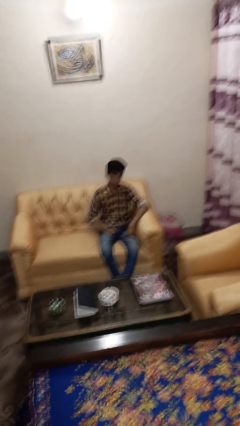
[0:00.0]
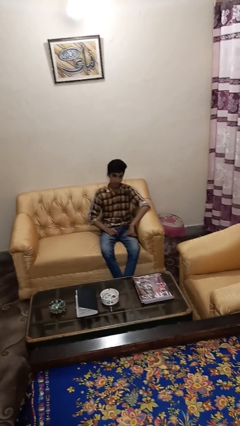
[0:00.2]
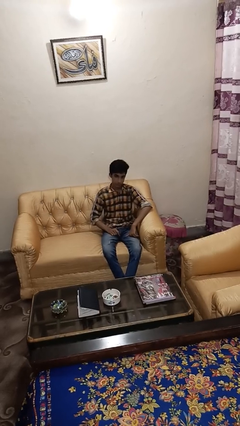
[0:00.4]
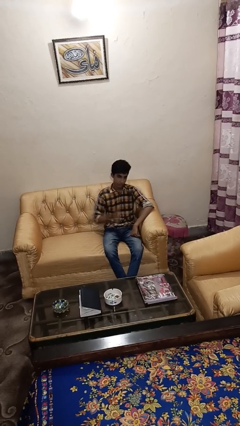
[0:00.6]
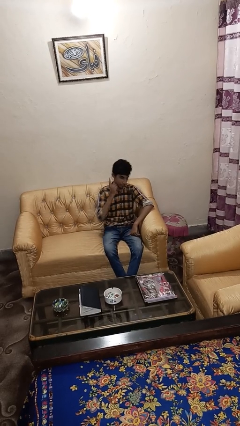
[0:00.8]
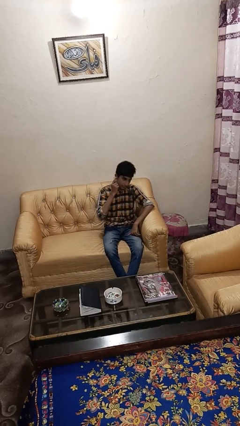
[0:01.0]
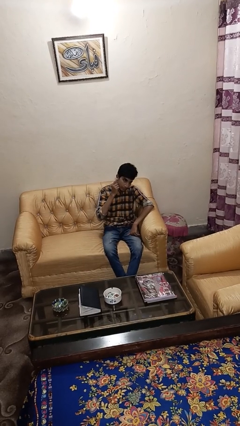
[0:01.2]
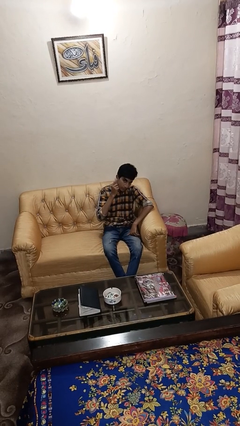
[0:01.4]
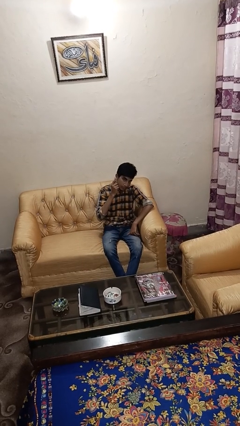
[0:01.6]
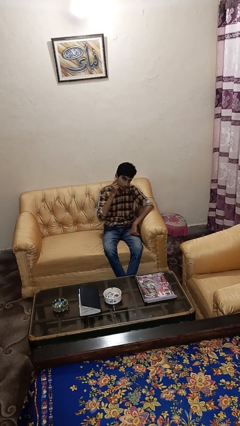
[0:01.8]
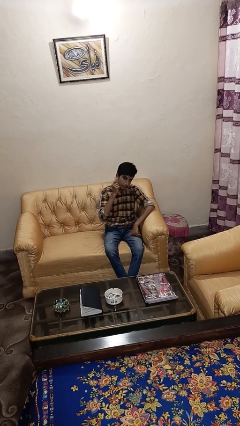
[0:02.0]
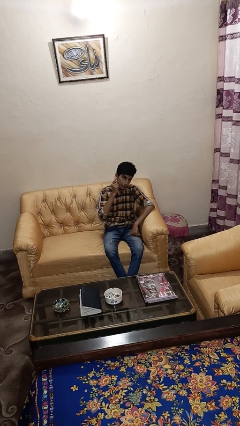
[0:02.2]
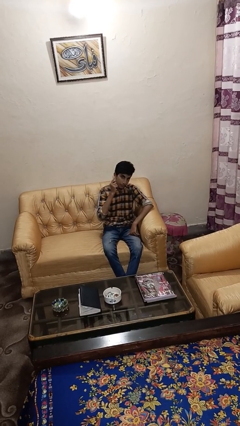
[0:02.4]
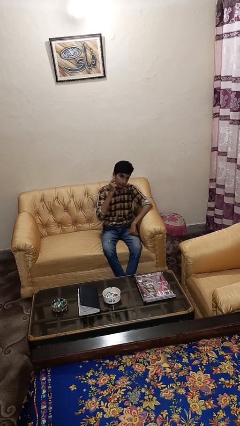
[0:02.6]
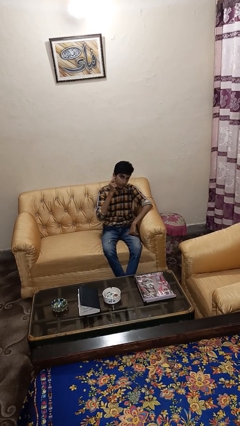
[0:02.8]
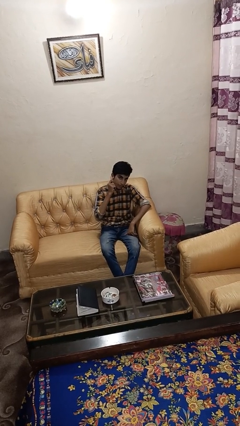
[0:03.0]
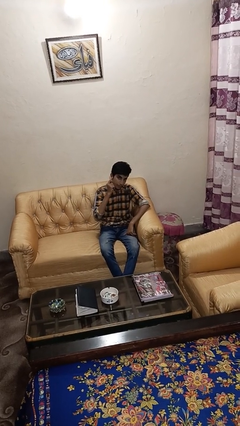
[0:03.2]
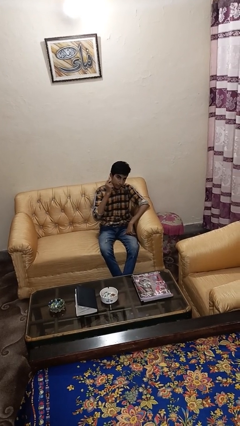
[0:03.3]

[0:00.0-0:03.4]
person gestures listen closely

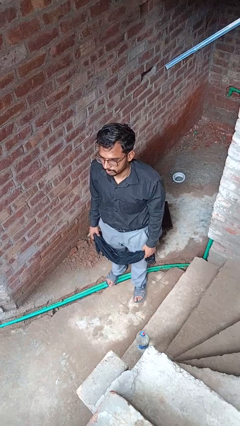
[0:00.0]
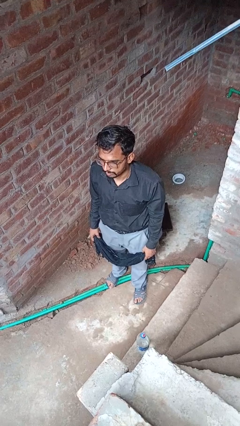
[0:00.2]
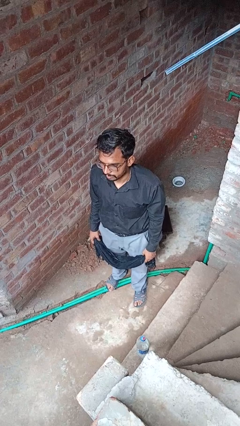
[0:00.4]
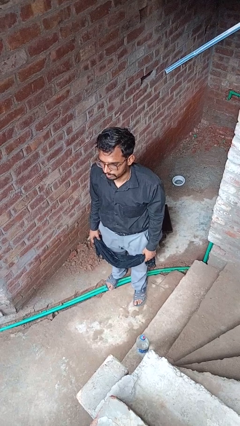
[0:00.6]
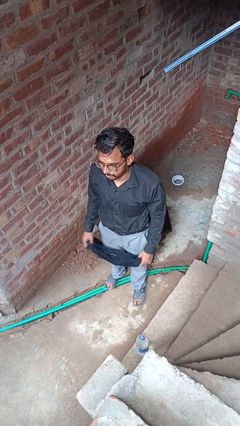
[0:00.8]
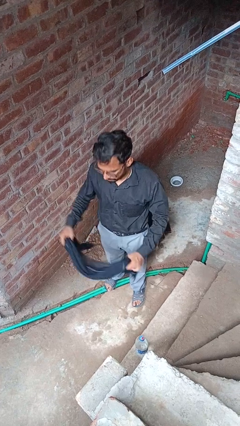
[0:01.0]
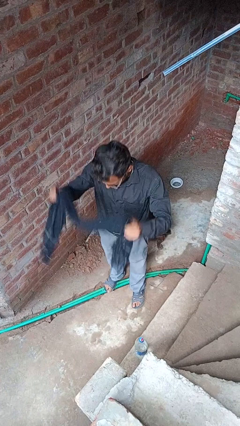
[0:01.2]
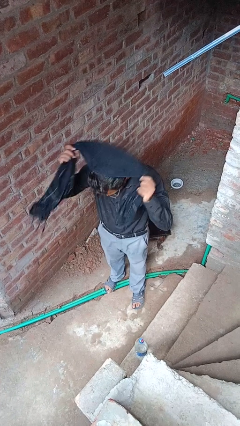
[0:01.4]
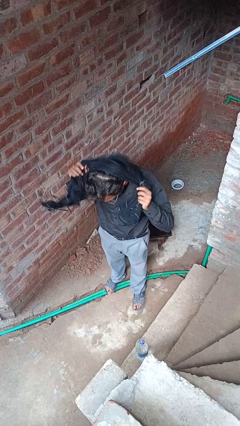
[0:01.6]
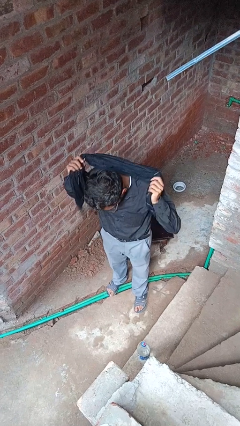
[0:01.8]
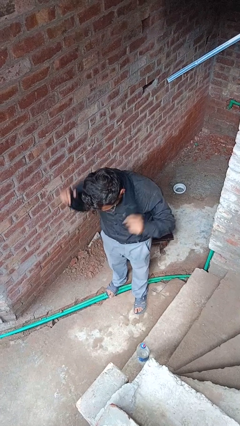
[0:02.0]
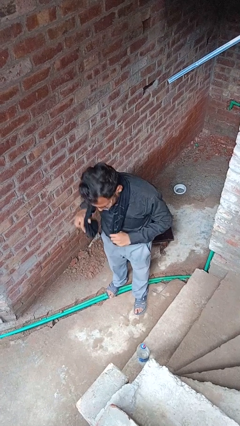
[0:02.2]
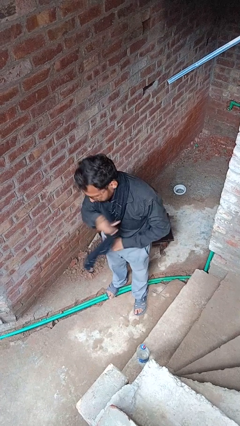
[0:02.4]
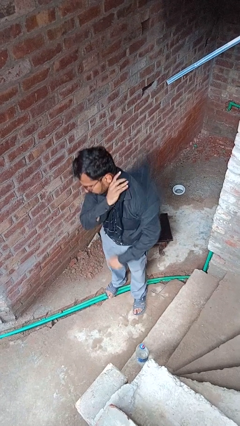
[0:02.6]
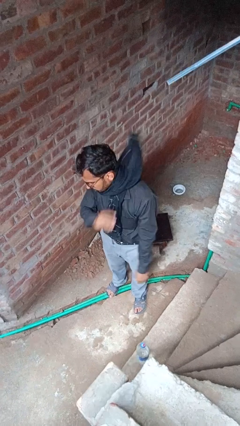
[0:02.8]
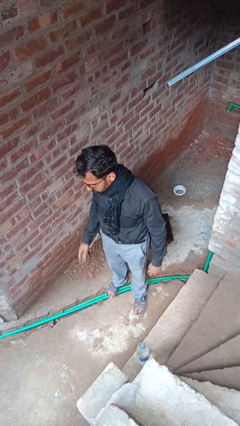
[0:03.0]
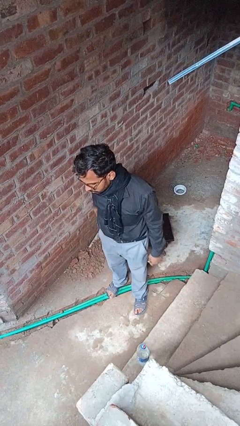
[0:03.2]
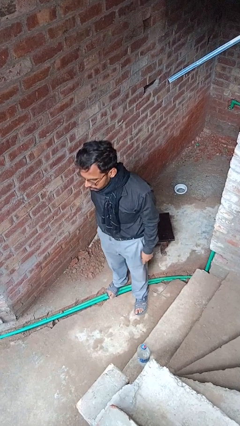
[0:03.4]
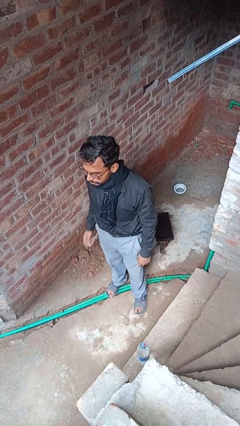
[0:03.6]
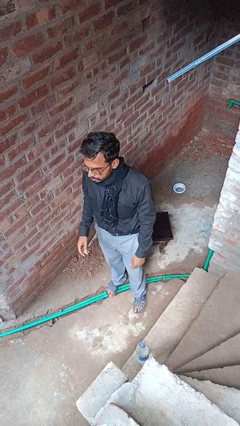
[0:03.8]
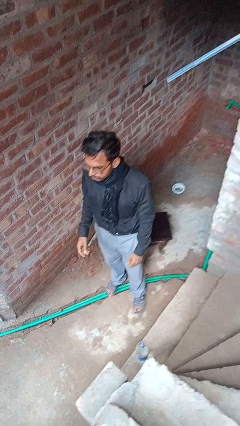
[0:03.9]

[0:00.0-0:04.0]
person puts on scarf

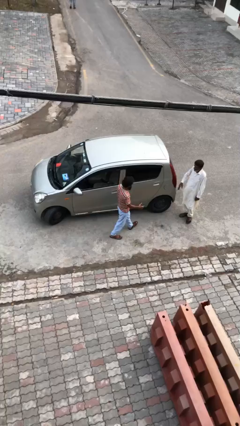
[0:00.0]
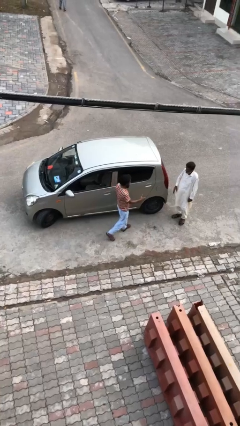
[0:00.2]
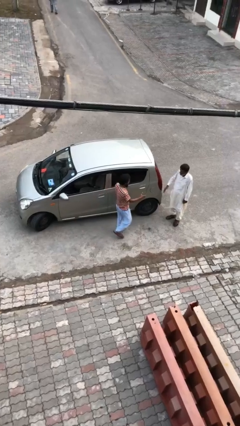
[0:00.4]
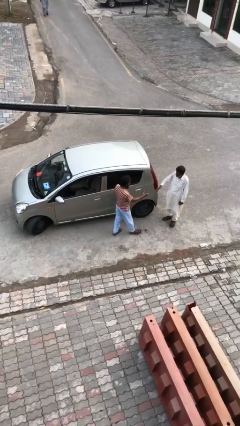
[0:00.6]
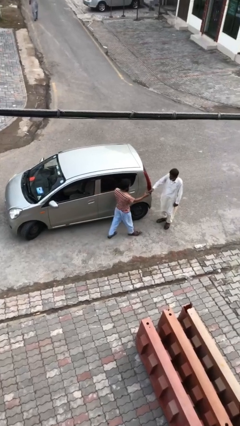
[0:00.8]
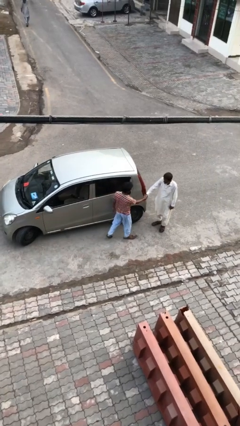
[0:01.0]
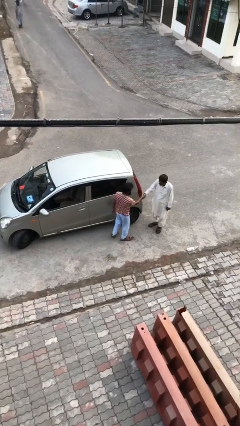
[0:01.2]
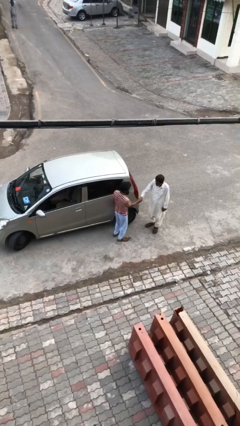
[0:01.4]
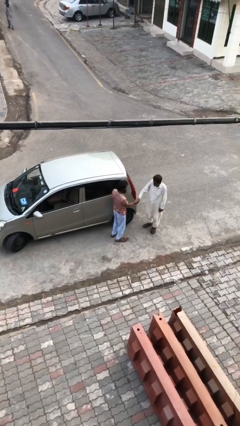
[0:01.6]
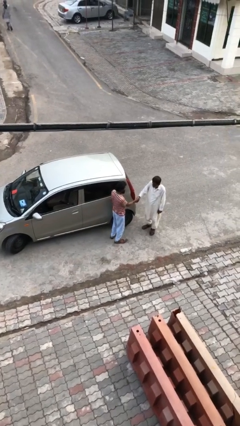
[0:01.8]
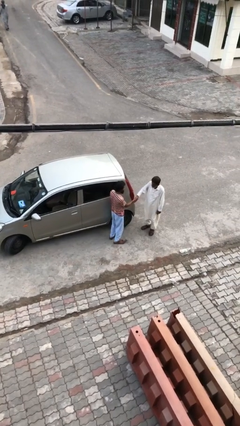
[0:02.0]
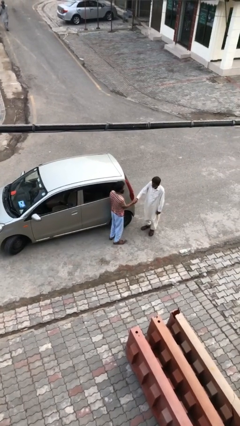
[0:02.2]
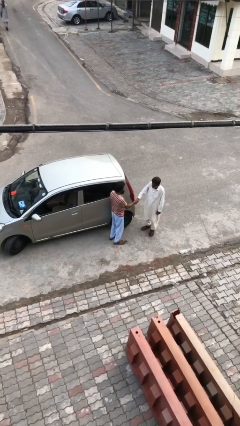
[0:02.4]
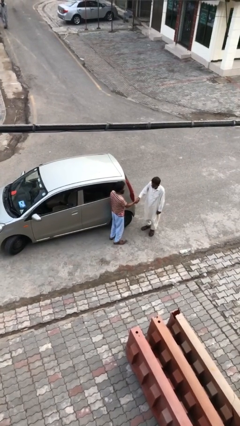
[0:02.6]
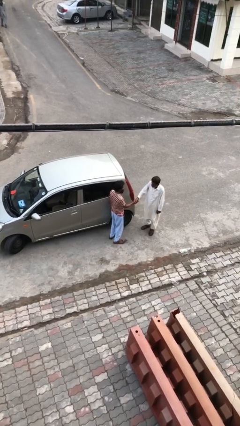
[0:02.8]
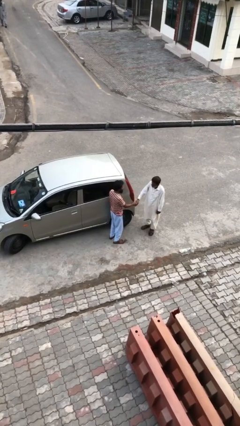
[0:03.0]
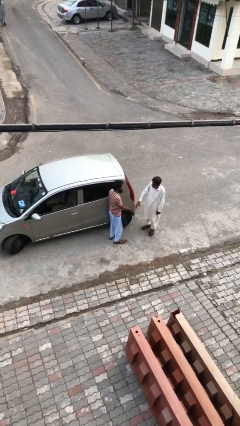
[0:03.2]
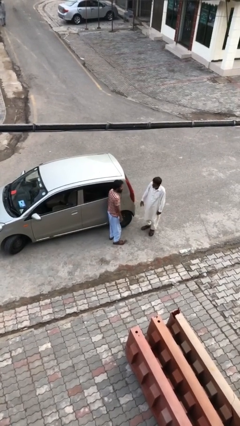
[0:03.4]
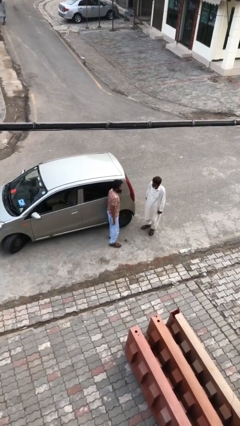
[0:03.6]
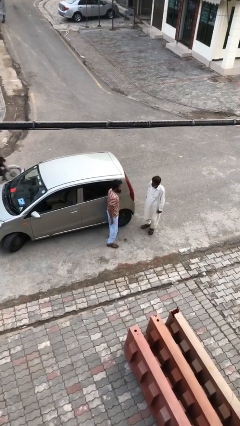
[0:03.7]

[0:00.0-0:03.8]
person shakes hand

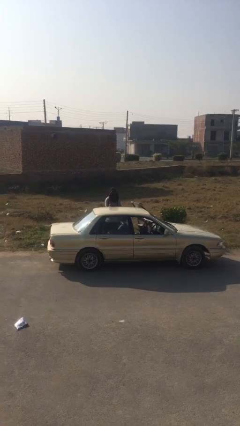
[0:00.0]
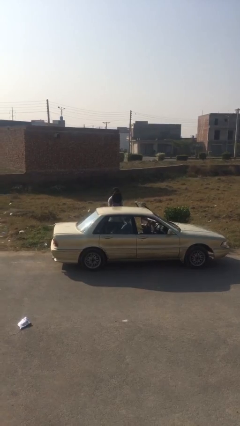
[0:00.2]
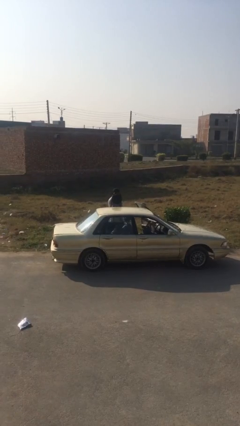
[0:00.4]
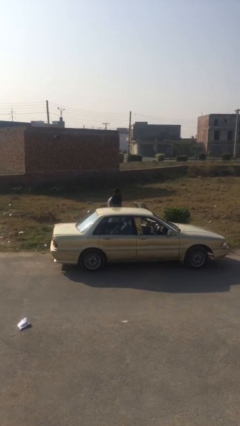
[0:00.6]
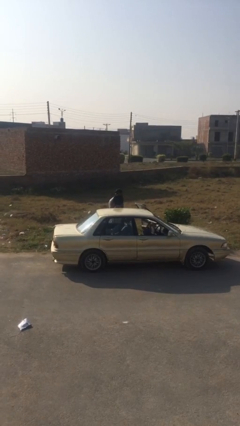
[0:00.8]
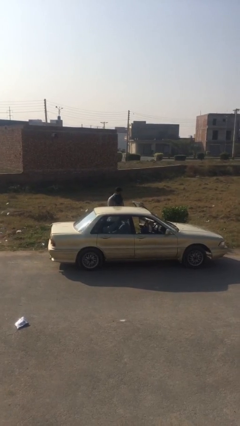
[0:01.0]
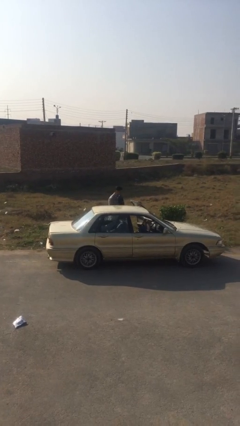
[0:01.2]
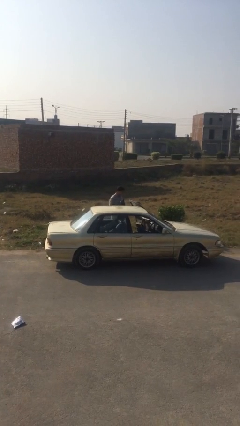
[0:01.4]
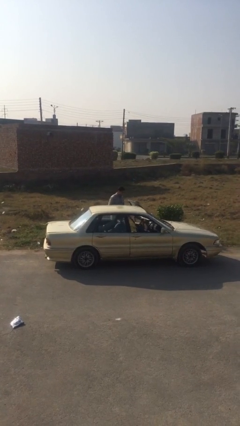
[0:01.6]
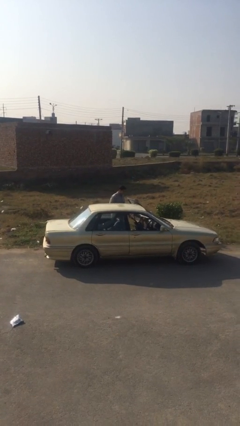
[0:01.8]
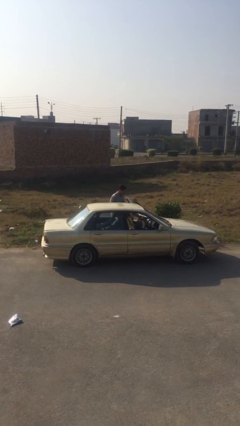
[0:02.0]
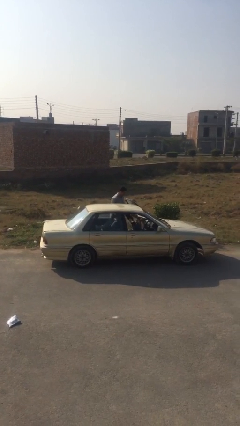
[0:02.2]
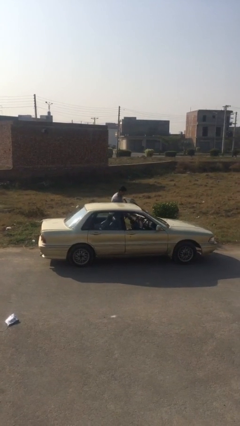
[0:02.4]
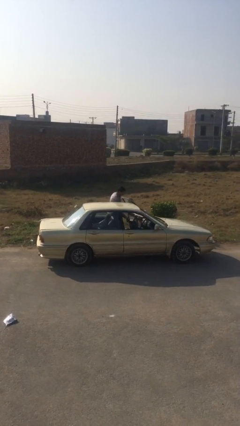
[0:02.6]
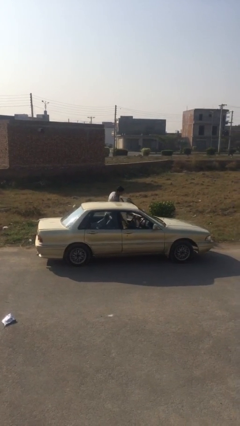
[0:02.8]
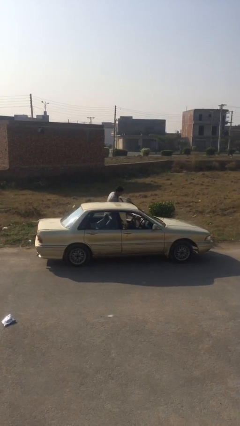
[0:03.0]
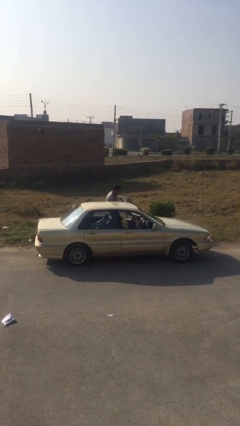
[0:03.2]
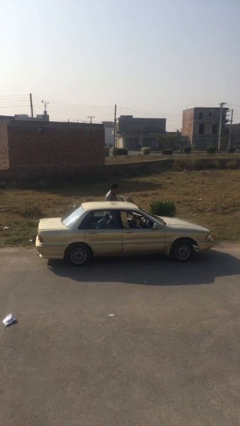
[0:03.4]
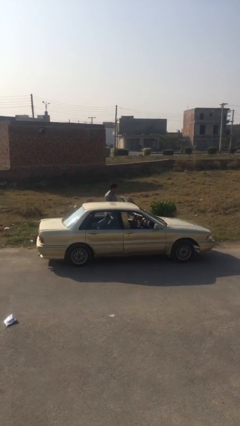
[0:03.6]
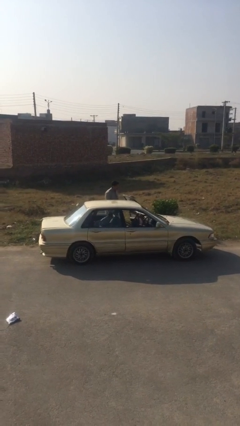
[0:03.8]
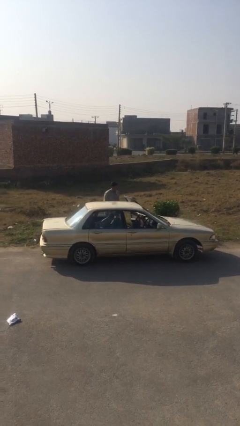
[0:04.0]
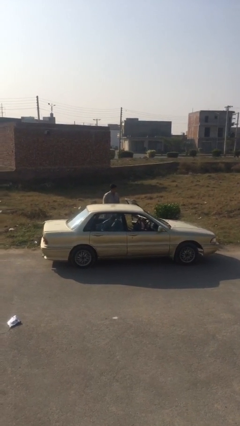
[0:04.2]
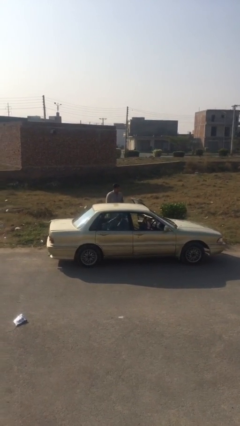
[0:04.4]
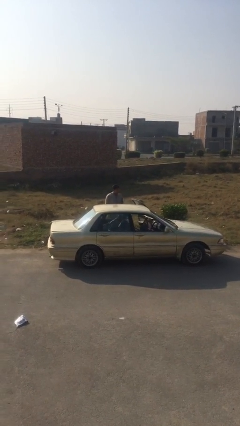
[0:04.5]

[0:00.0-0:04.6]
person loads car

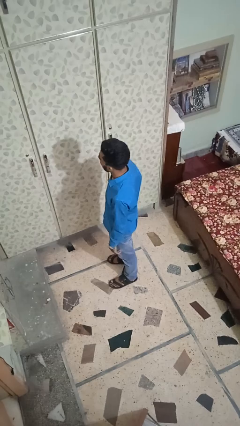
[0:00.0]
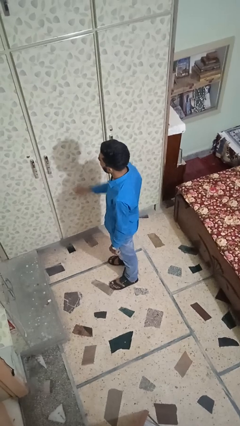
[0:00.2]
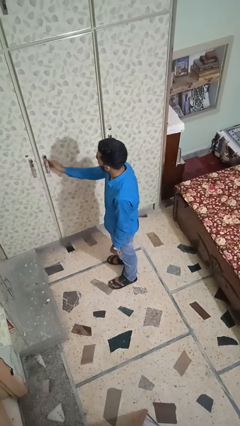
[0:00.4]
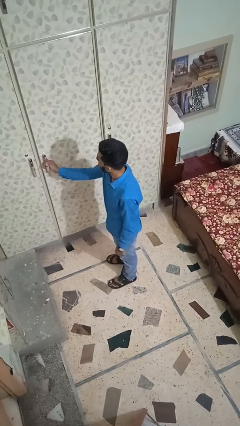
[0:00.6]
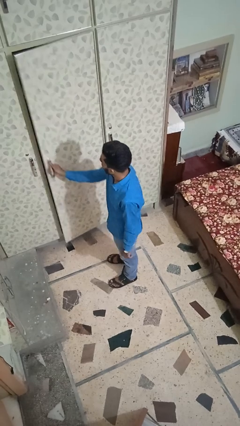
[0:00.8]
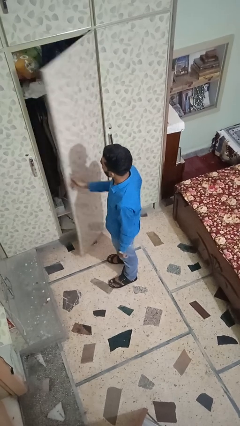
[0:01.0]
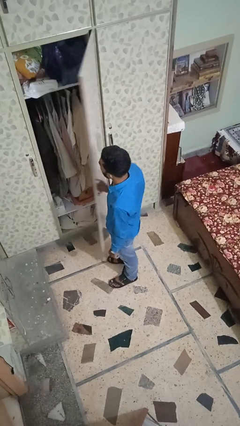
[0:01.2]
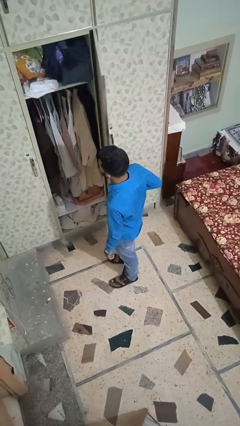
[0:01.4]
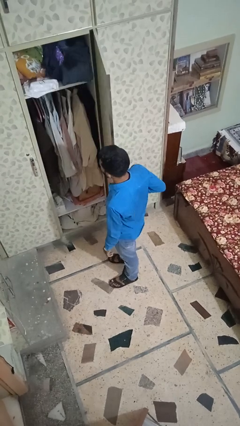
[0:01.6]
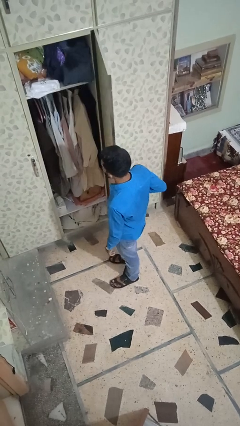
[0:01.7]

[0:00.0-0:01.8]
person opens closet door
